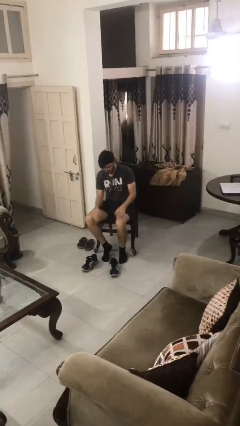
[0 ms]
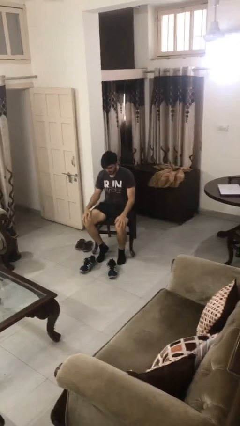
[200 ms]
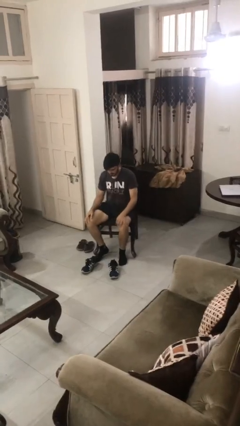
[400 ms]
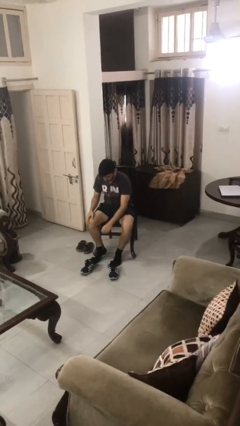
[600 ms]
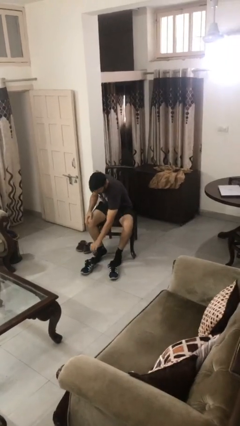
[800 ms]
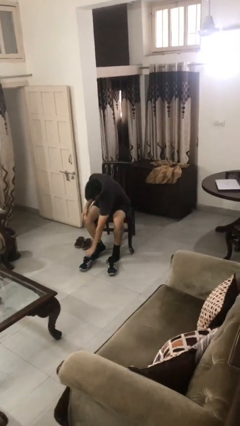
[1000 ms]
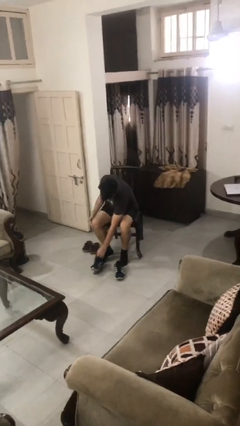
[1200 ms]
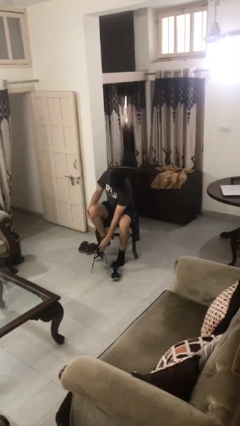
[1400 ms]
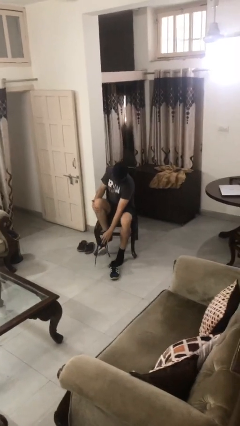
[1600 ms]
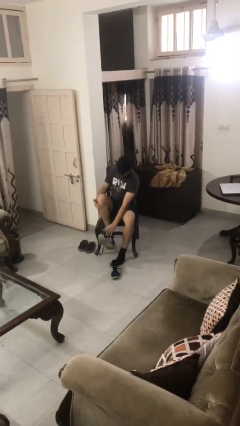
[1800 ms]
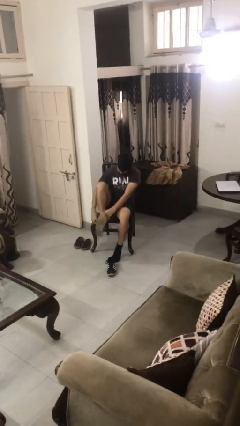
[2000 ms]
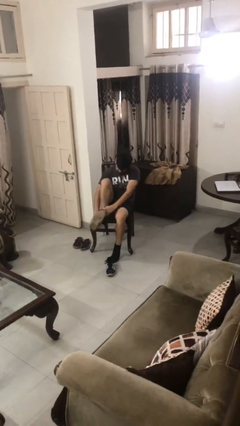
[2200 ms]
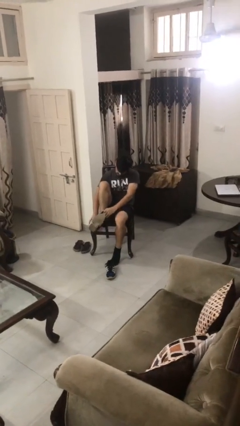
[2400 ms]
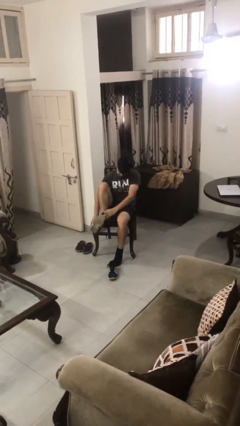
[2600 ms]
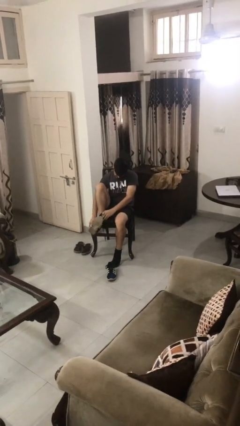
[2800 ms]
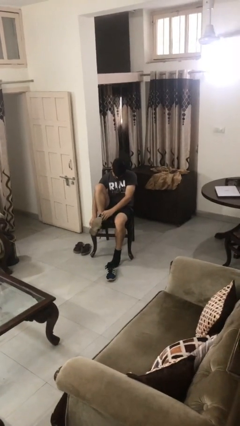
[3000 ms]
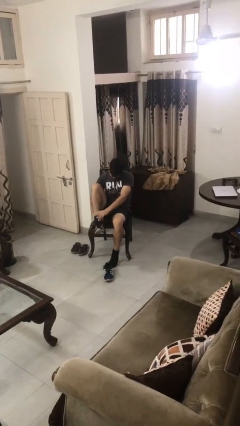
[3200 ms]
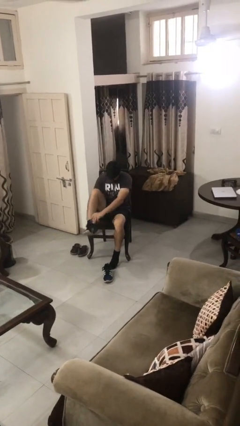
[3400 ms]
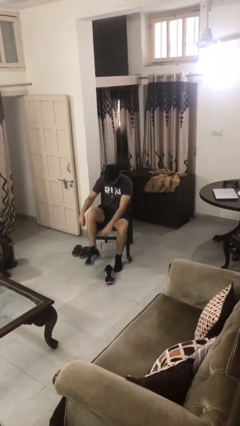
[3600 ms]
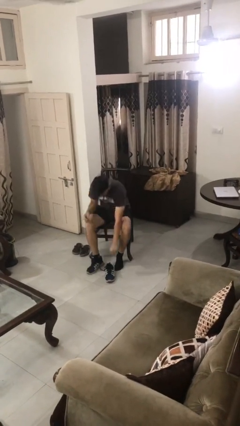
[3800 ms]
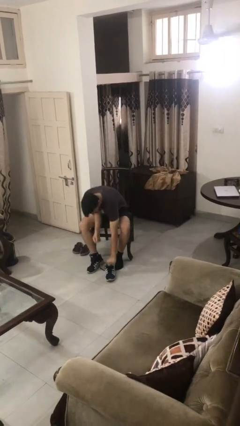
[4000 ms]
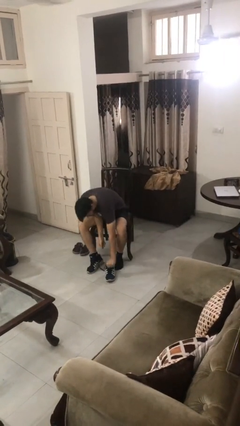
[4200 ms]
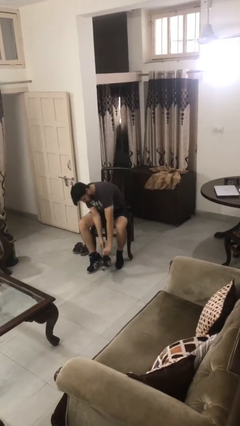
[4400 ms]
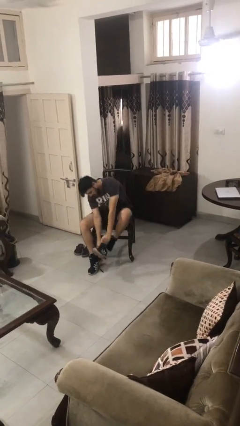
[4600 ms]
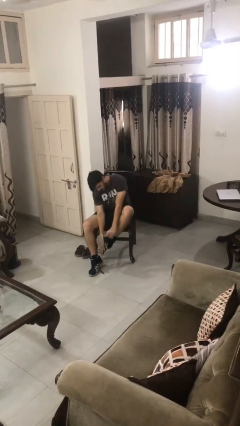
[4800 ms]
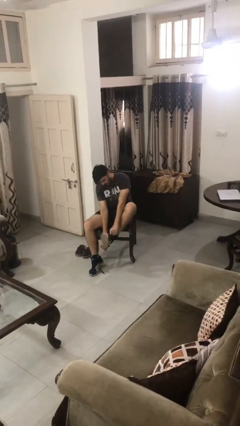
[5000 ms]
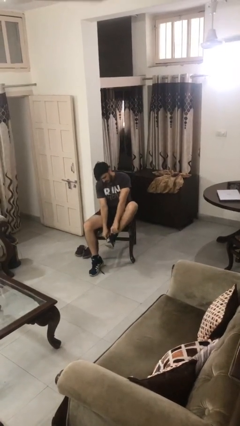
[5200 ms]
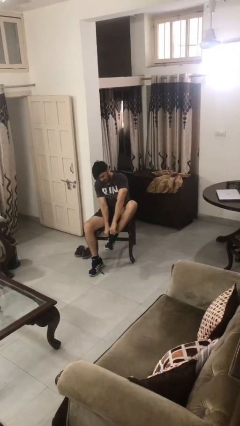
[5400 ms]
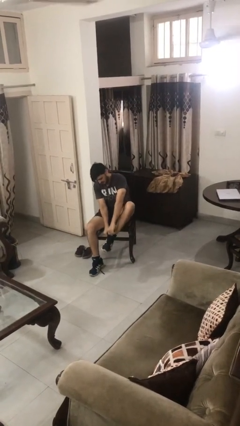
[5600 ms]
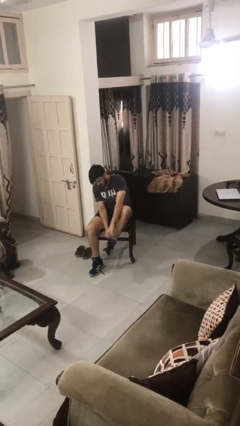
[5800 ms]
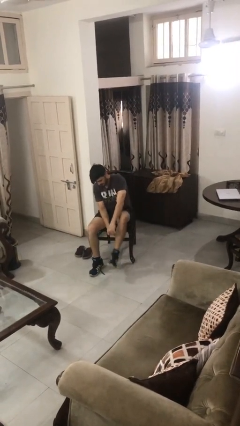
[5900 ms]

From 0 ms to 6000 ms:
person puts on shoes

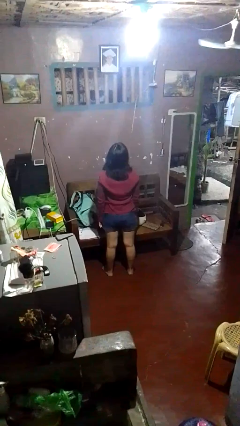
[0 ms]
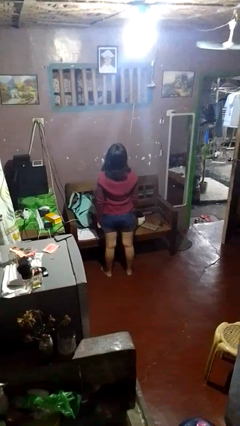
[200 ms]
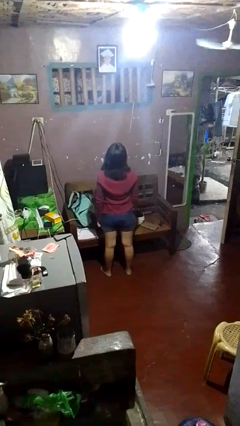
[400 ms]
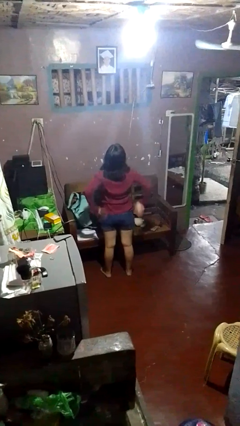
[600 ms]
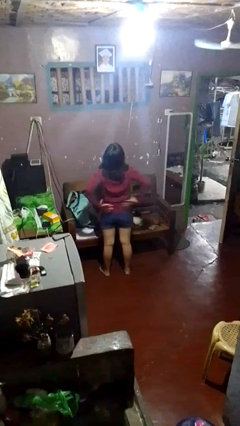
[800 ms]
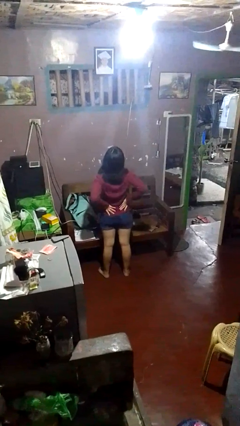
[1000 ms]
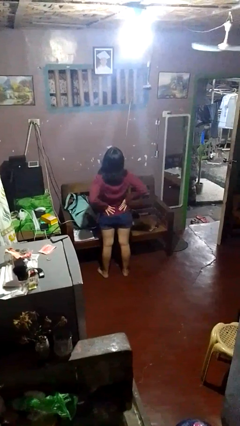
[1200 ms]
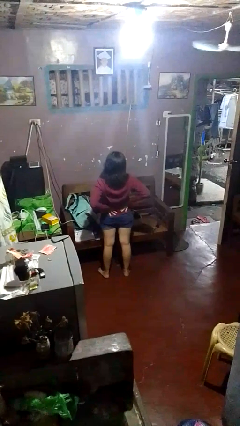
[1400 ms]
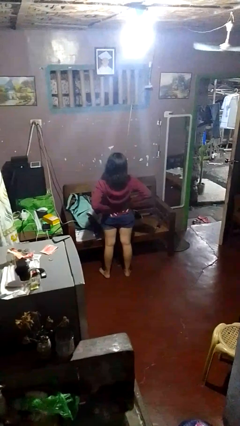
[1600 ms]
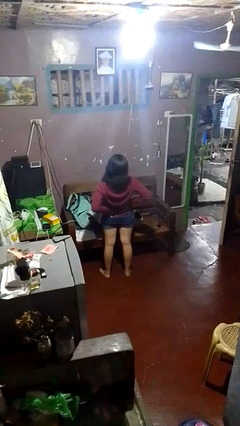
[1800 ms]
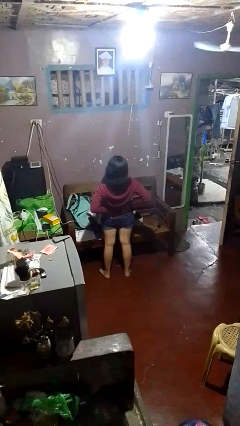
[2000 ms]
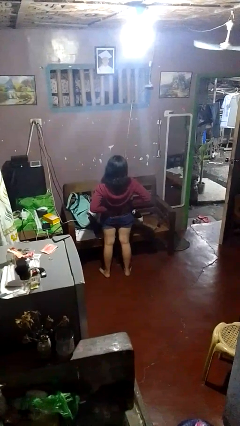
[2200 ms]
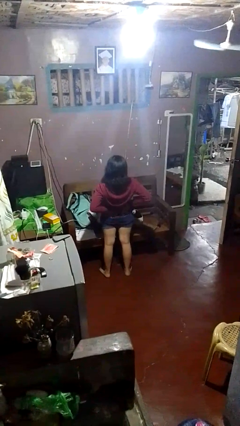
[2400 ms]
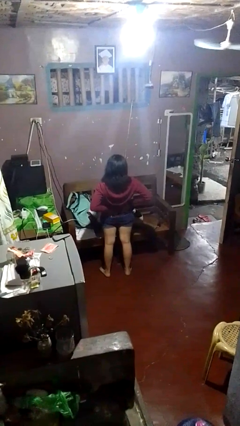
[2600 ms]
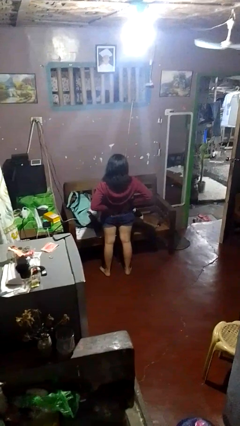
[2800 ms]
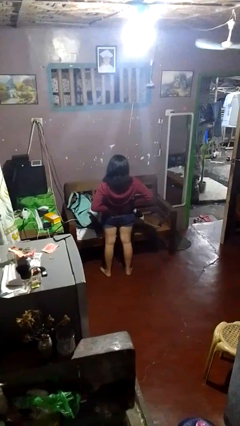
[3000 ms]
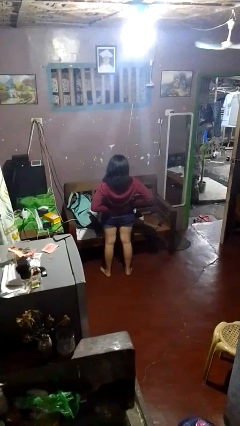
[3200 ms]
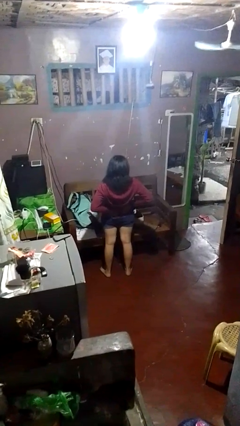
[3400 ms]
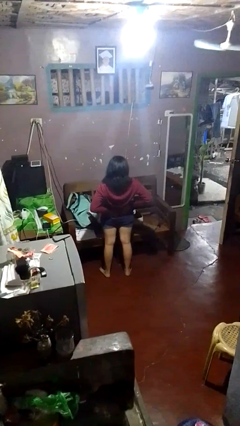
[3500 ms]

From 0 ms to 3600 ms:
person stretches back

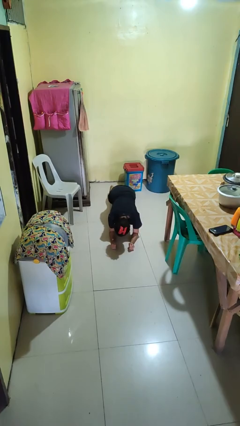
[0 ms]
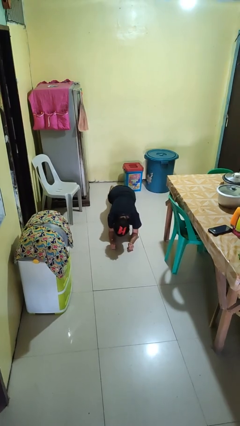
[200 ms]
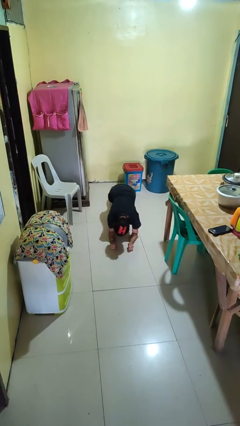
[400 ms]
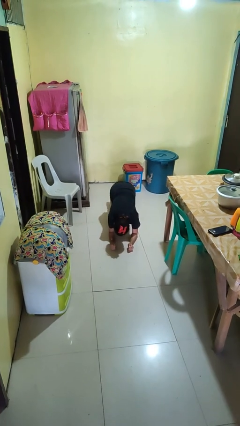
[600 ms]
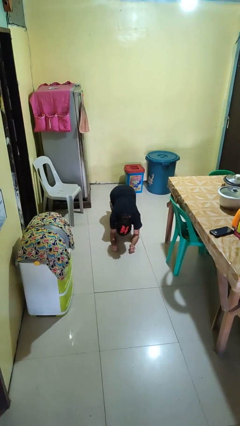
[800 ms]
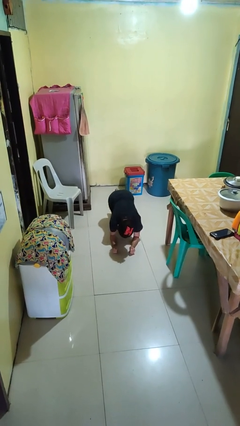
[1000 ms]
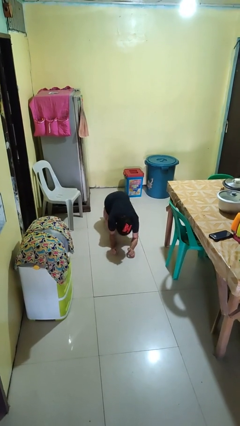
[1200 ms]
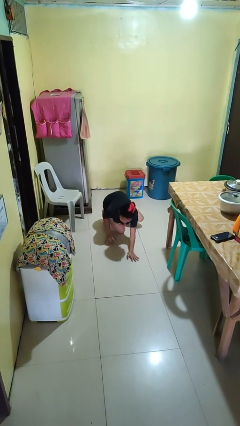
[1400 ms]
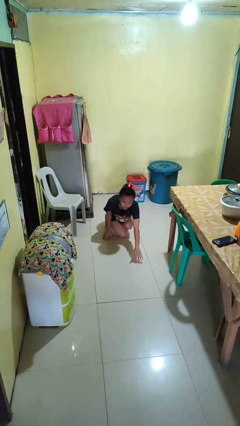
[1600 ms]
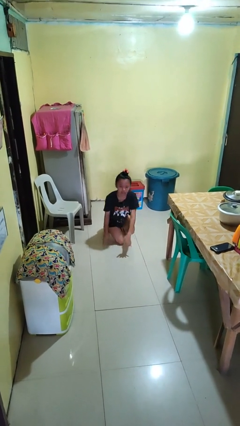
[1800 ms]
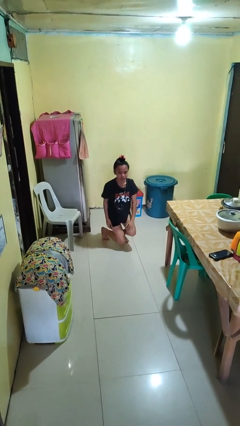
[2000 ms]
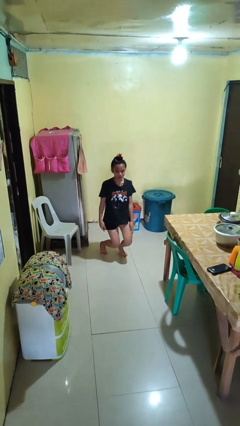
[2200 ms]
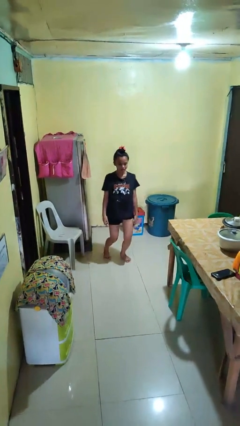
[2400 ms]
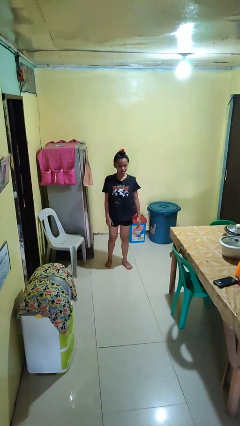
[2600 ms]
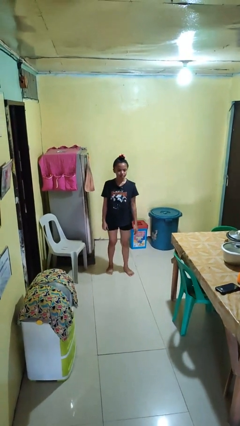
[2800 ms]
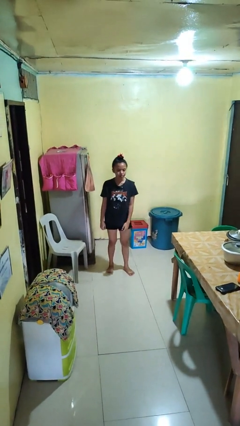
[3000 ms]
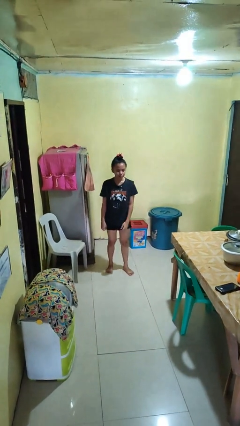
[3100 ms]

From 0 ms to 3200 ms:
person stands up from floor

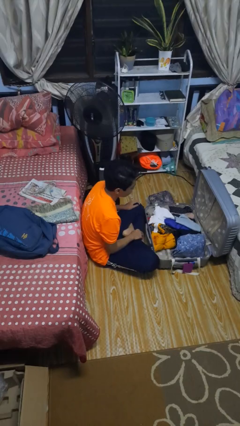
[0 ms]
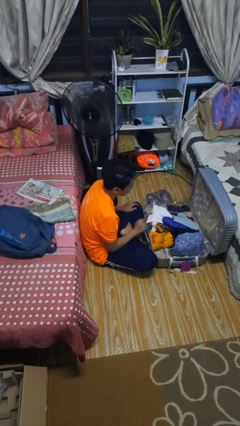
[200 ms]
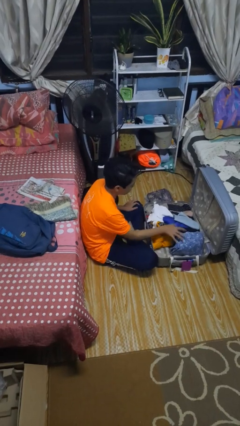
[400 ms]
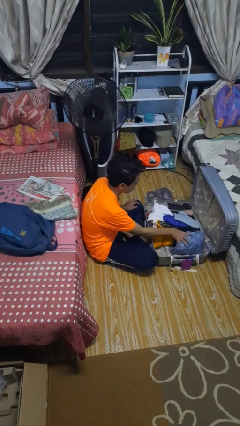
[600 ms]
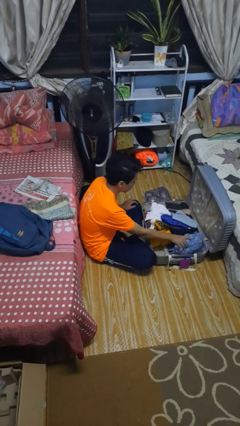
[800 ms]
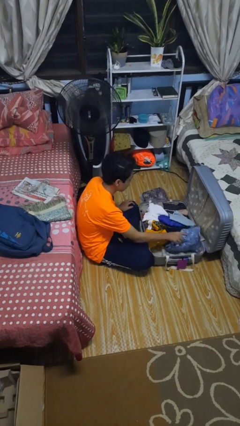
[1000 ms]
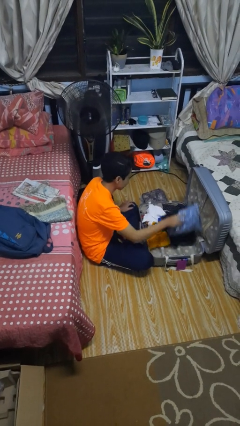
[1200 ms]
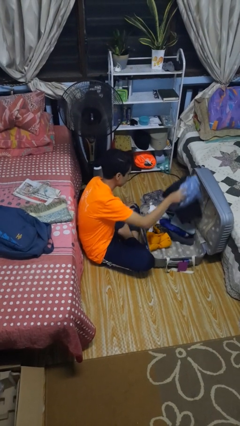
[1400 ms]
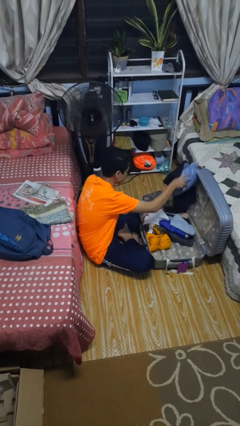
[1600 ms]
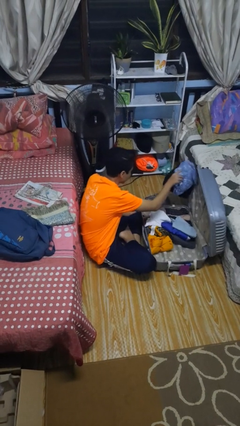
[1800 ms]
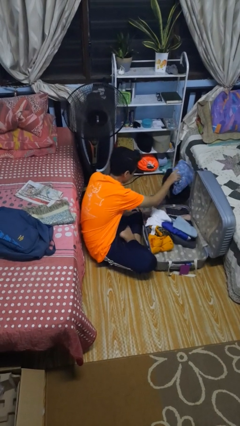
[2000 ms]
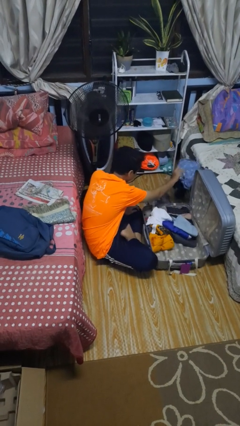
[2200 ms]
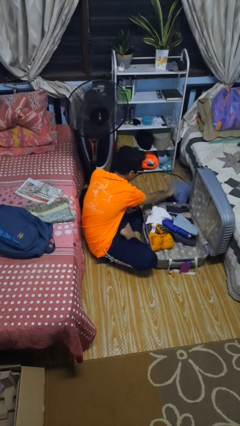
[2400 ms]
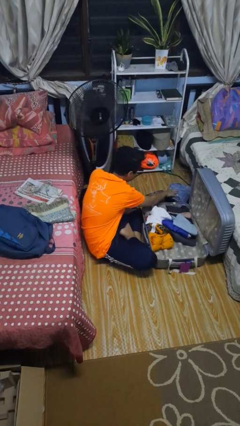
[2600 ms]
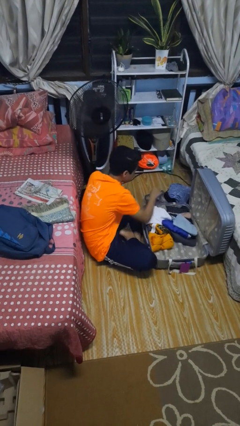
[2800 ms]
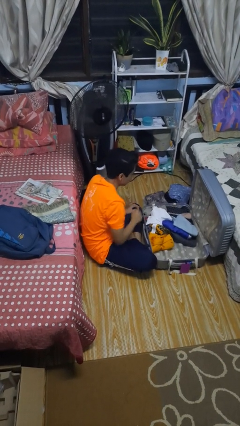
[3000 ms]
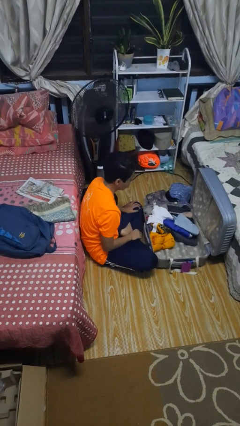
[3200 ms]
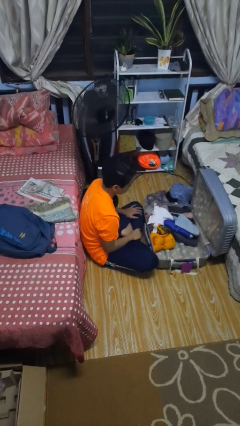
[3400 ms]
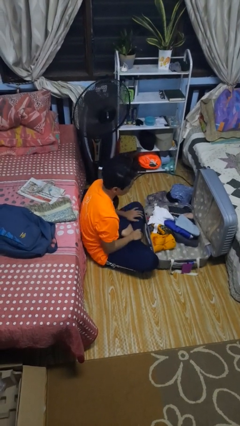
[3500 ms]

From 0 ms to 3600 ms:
person unloads clothes from suitcase

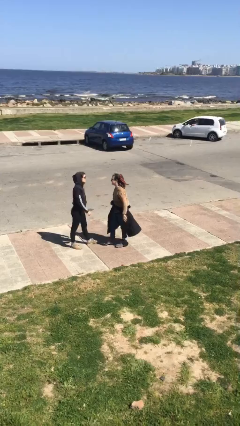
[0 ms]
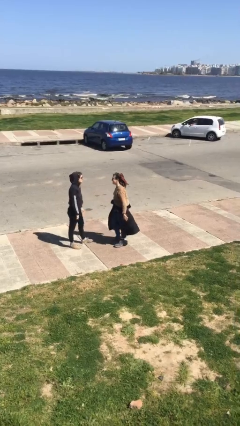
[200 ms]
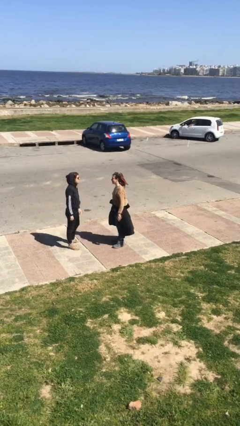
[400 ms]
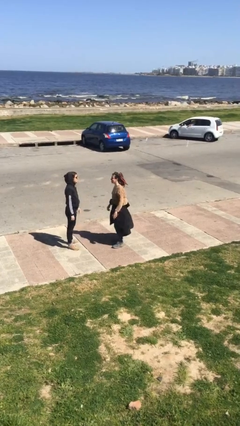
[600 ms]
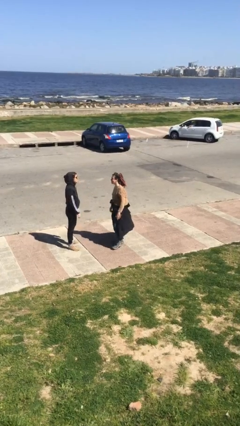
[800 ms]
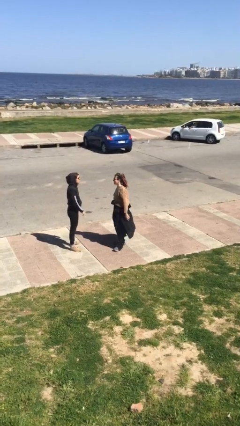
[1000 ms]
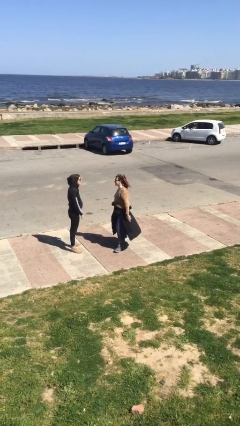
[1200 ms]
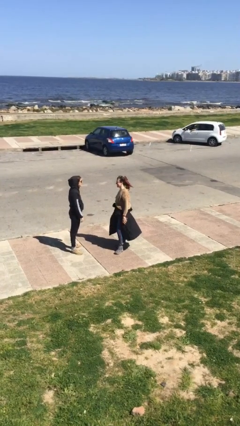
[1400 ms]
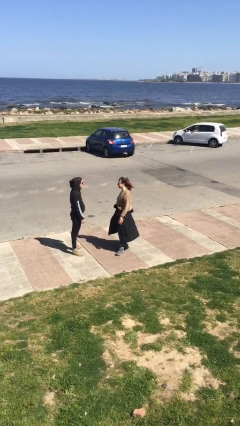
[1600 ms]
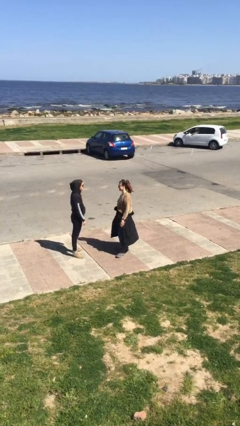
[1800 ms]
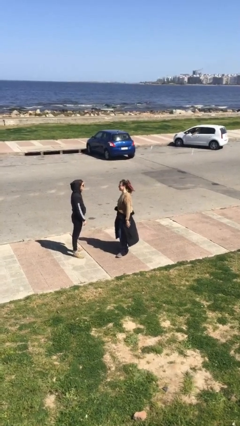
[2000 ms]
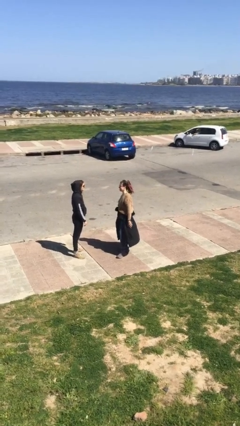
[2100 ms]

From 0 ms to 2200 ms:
person talks to person
